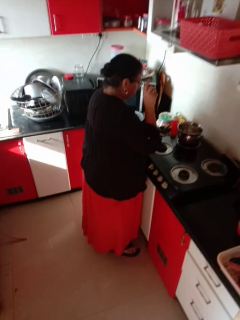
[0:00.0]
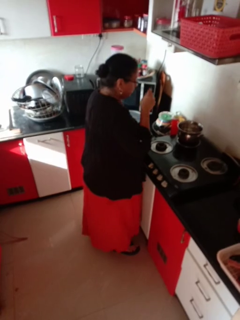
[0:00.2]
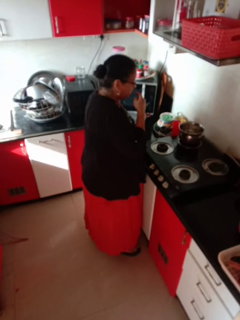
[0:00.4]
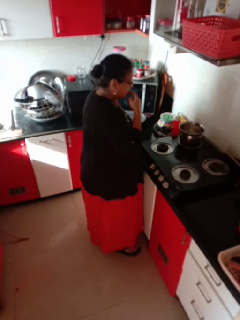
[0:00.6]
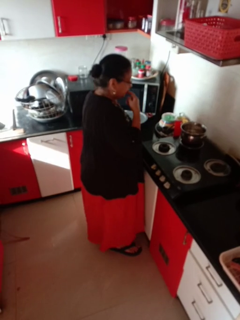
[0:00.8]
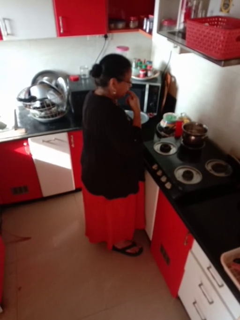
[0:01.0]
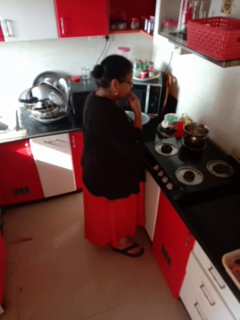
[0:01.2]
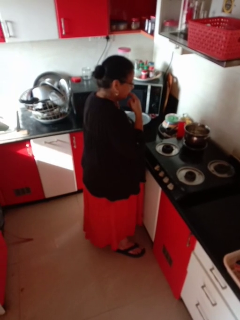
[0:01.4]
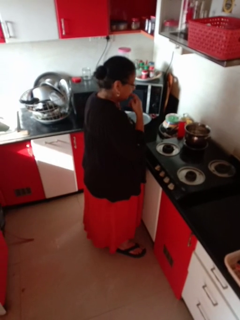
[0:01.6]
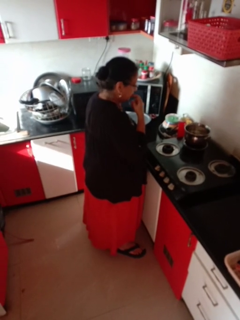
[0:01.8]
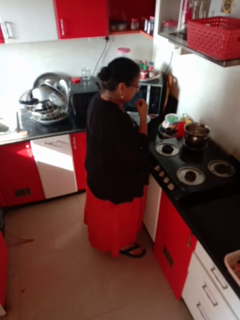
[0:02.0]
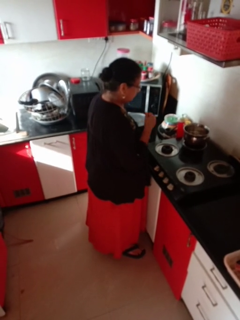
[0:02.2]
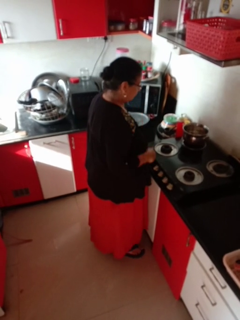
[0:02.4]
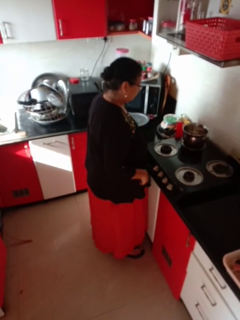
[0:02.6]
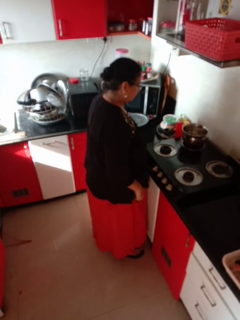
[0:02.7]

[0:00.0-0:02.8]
person burns hand

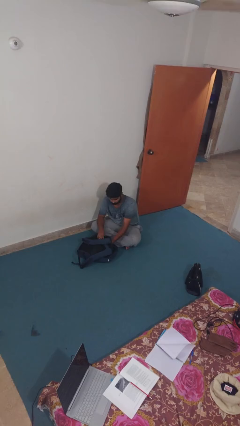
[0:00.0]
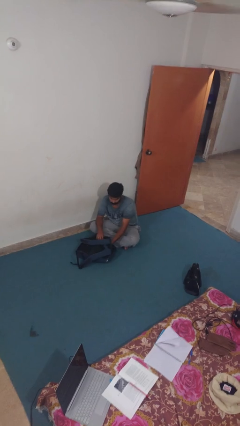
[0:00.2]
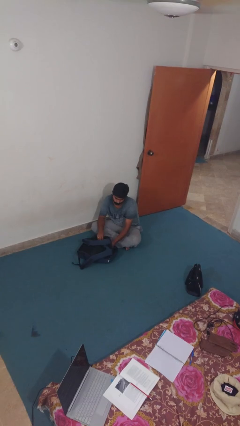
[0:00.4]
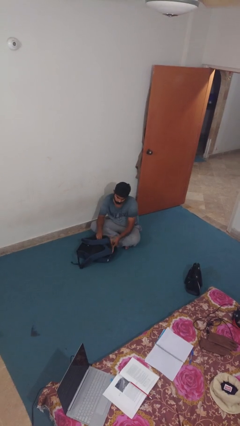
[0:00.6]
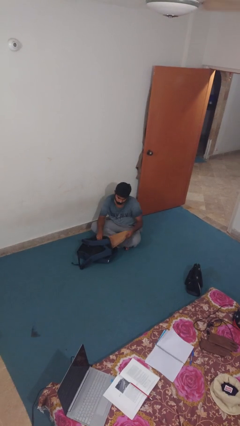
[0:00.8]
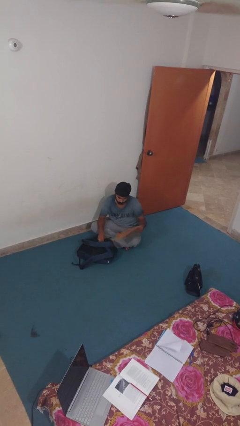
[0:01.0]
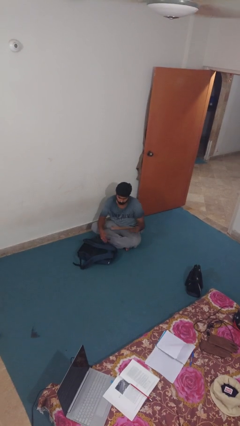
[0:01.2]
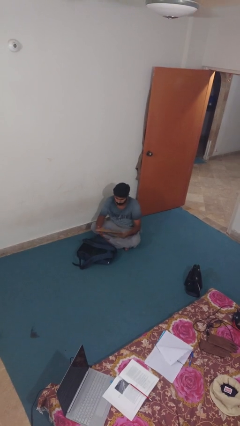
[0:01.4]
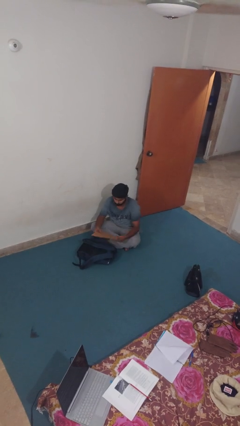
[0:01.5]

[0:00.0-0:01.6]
person takes object from backpack

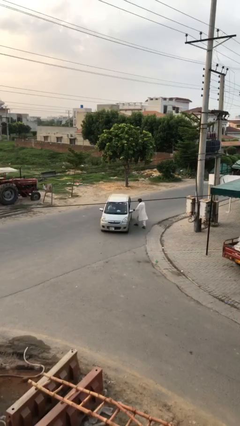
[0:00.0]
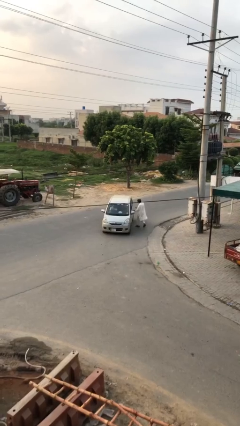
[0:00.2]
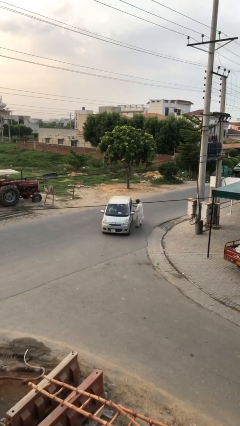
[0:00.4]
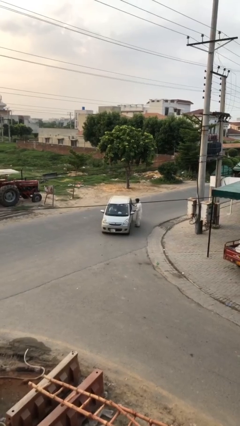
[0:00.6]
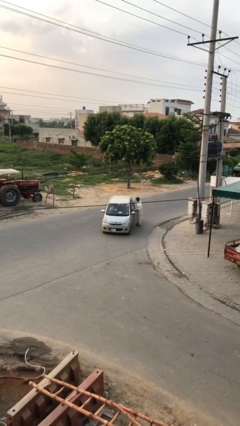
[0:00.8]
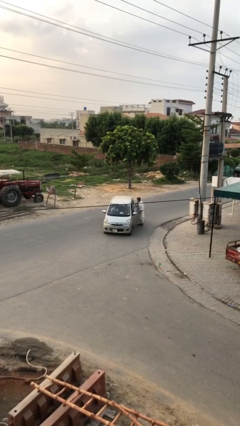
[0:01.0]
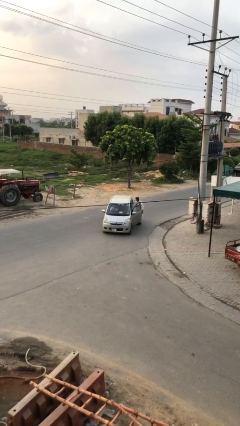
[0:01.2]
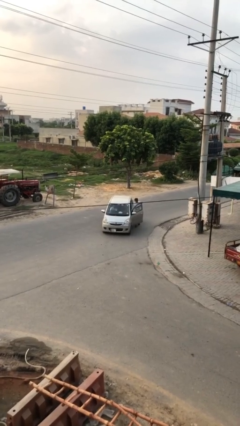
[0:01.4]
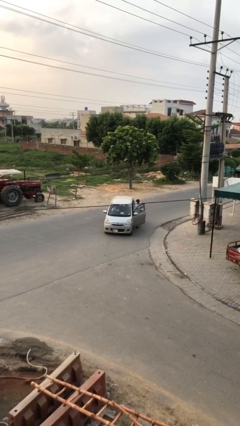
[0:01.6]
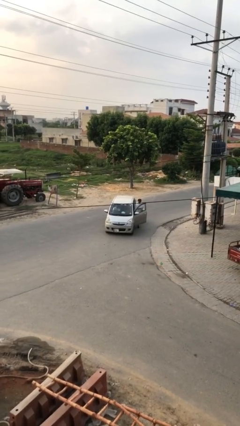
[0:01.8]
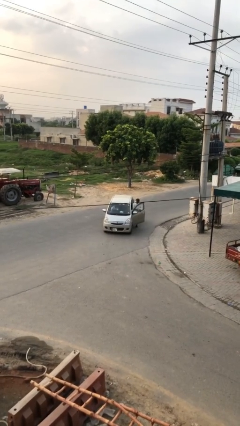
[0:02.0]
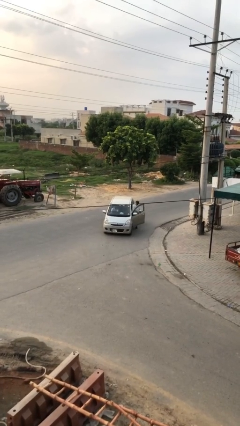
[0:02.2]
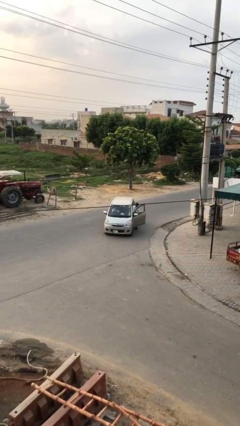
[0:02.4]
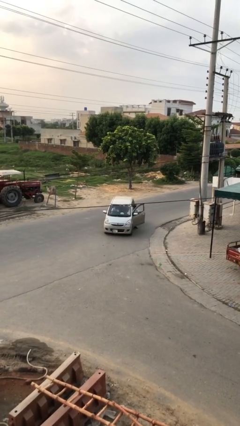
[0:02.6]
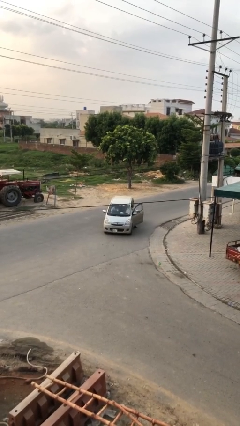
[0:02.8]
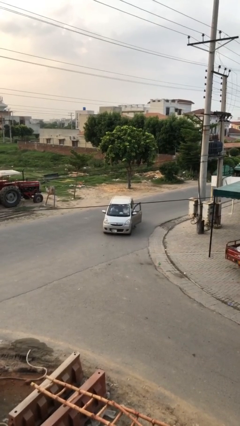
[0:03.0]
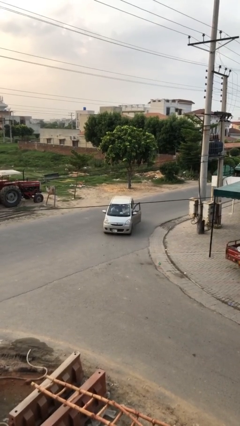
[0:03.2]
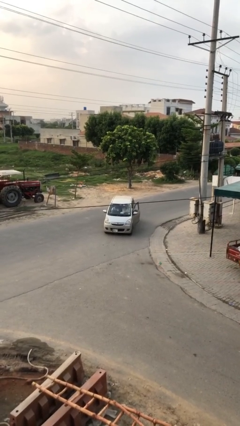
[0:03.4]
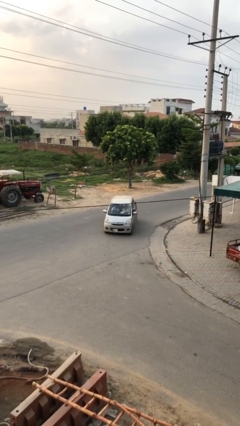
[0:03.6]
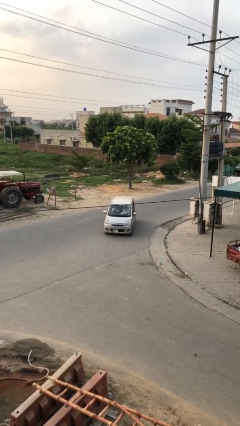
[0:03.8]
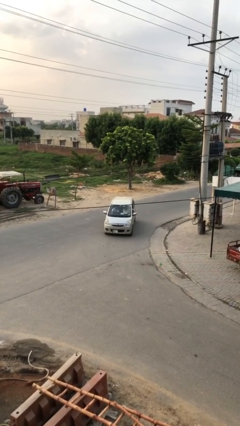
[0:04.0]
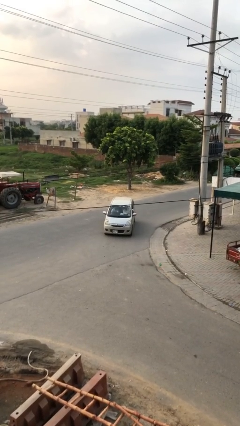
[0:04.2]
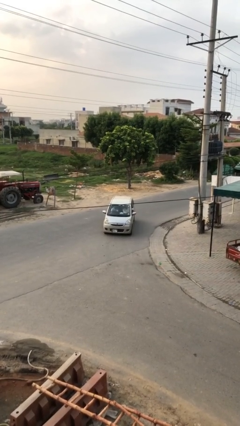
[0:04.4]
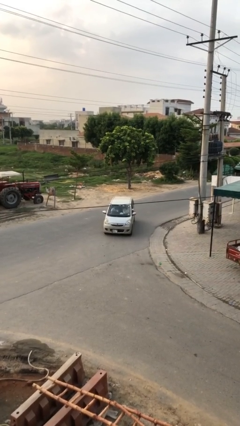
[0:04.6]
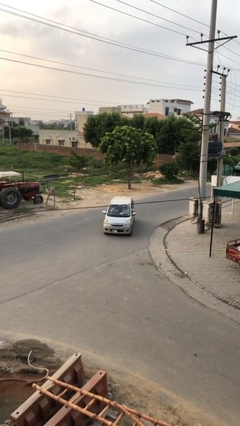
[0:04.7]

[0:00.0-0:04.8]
car picks up person

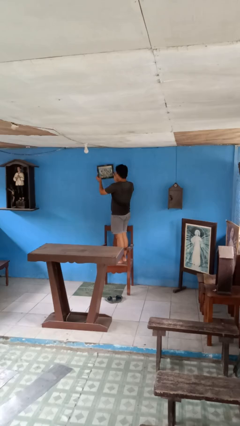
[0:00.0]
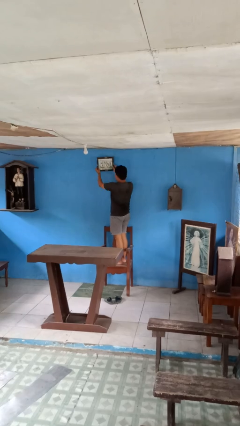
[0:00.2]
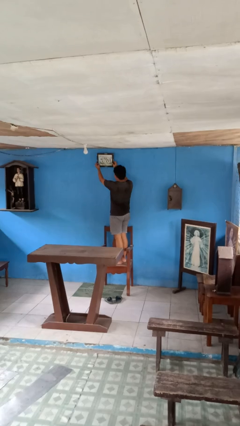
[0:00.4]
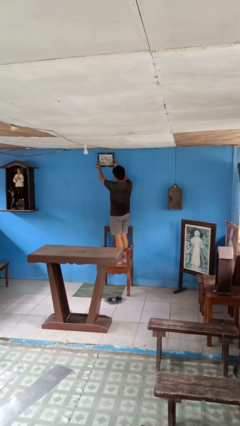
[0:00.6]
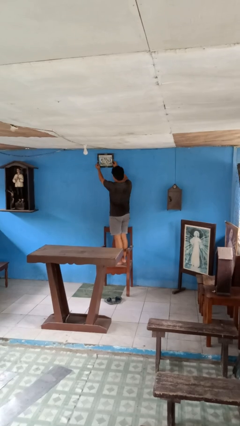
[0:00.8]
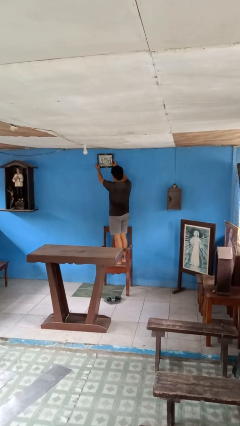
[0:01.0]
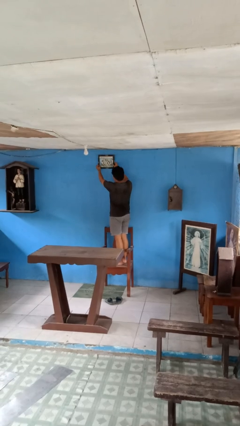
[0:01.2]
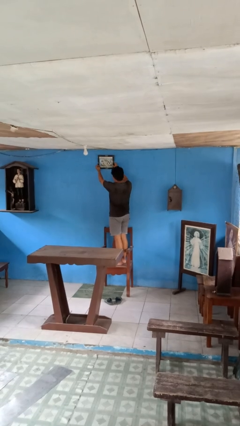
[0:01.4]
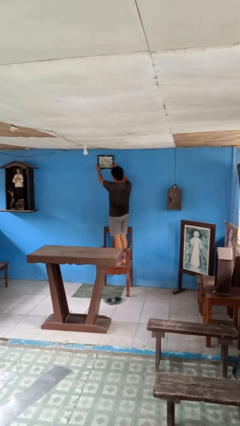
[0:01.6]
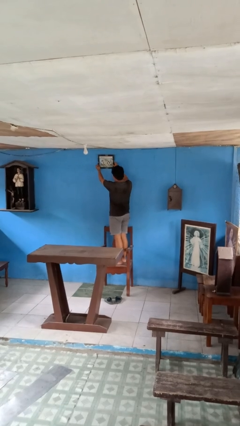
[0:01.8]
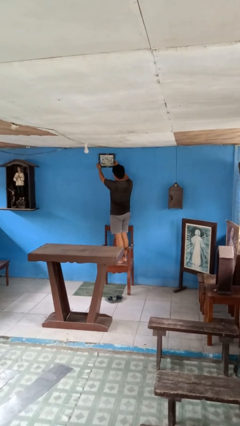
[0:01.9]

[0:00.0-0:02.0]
person puts up picture frame

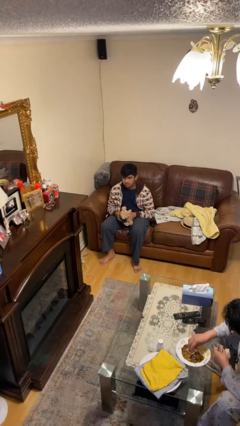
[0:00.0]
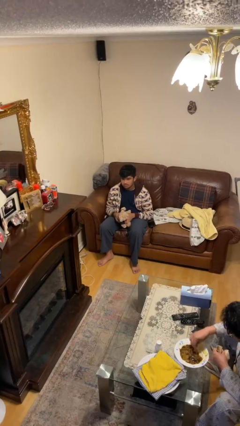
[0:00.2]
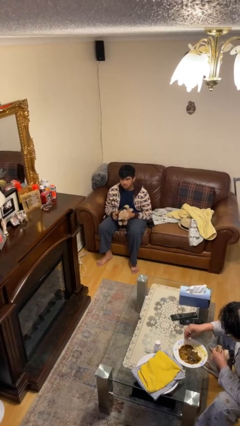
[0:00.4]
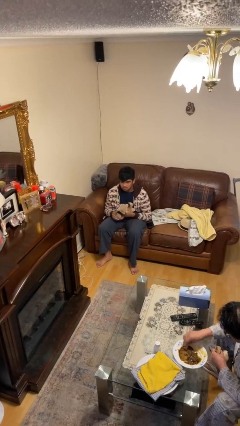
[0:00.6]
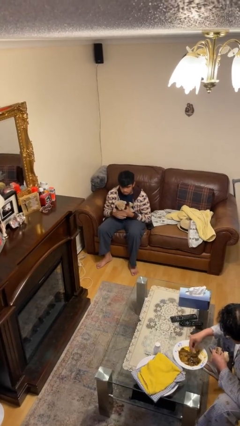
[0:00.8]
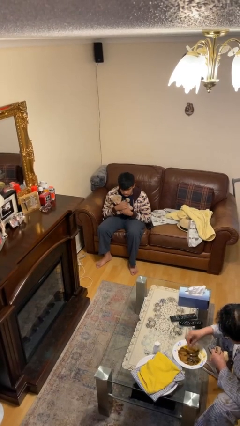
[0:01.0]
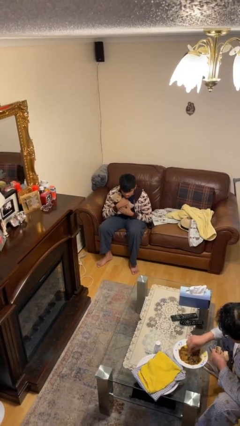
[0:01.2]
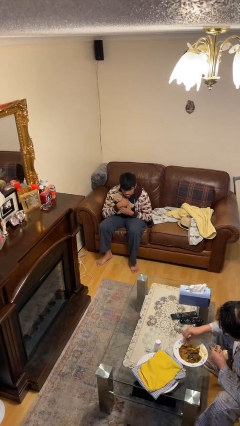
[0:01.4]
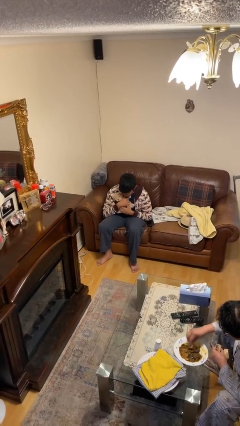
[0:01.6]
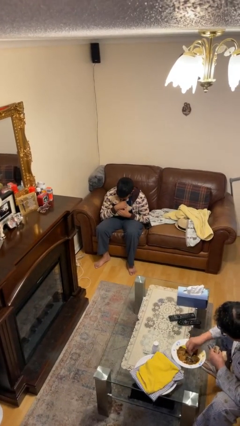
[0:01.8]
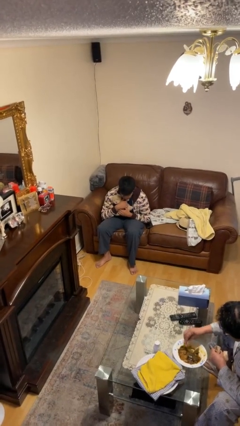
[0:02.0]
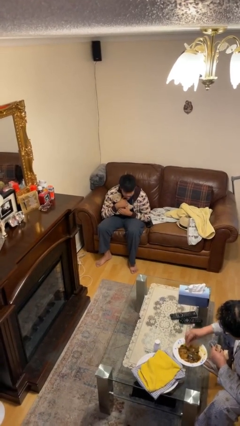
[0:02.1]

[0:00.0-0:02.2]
person hugs stuffed animal

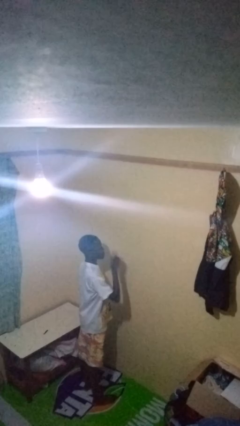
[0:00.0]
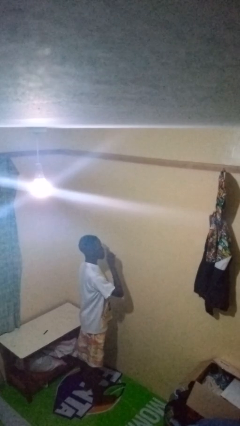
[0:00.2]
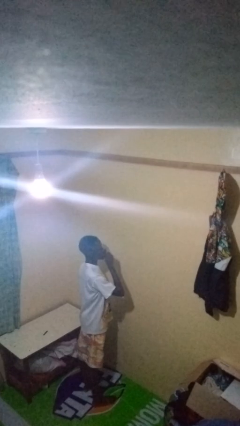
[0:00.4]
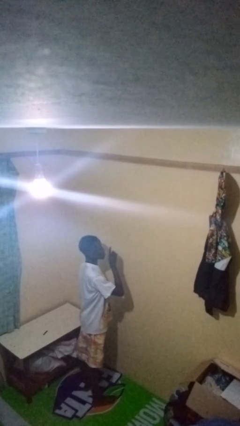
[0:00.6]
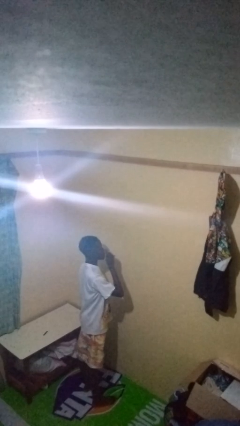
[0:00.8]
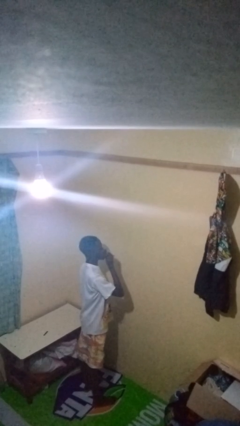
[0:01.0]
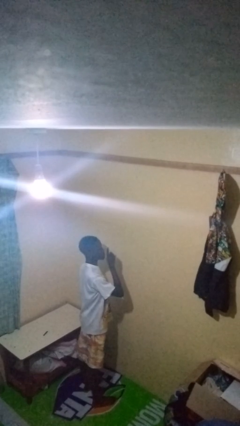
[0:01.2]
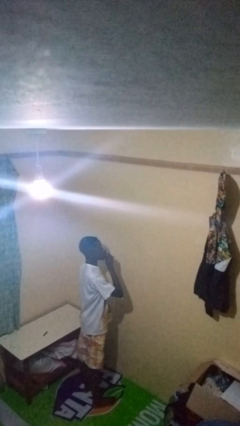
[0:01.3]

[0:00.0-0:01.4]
person gestures be quiet

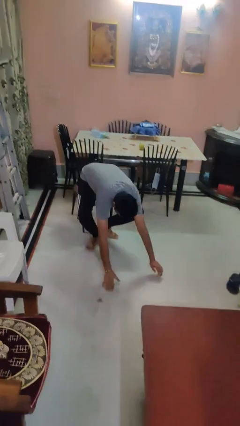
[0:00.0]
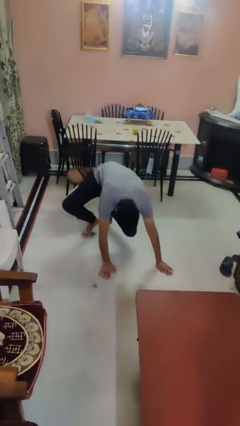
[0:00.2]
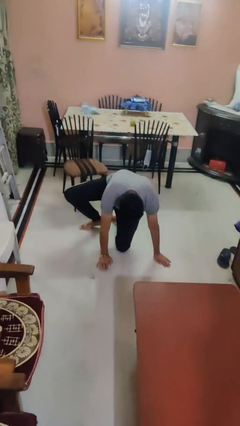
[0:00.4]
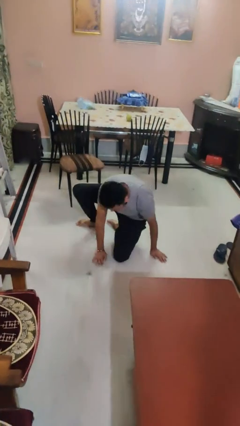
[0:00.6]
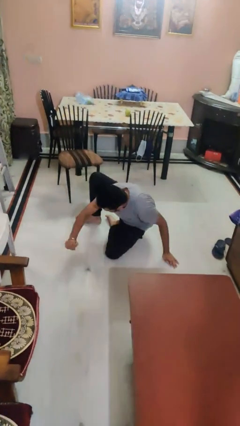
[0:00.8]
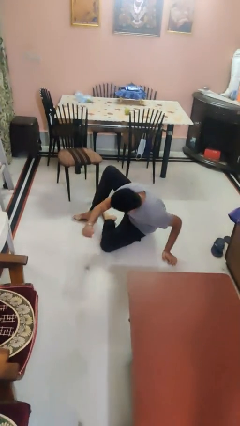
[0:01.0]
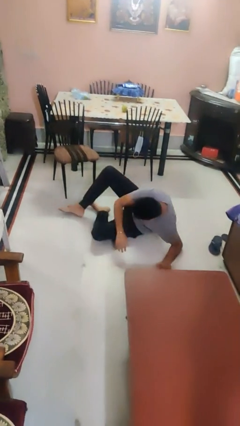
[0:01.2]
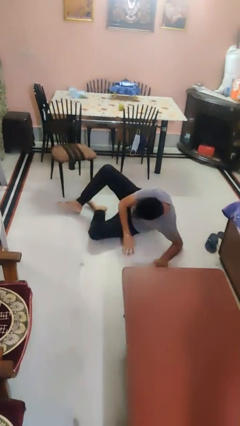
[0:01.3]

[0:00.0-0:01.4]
person falls while standing

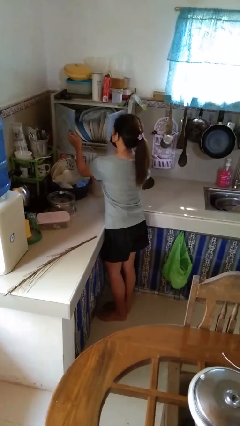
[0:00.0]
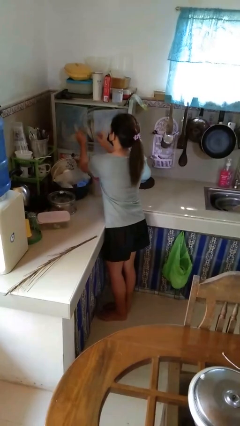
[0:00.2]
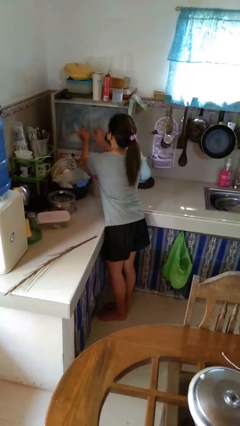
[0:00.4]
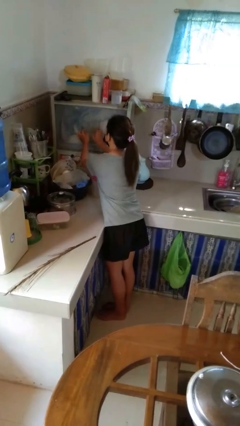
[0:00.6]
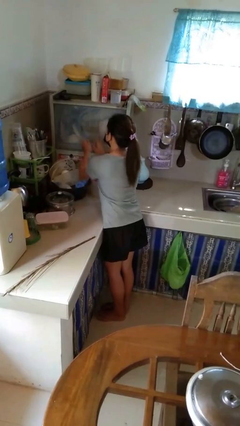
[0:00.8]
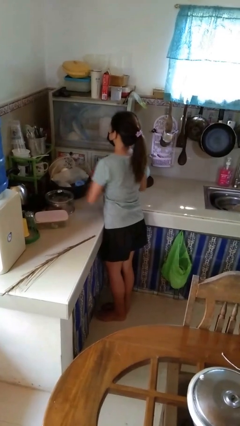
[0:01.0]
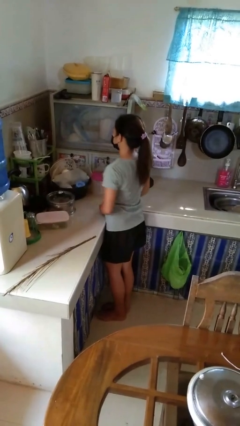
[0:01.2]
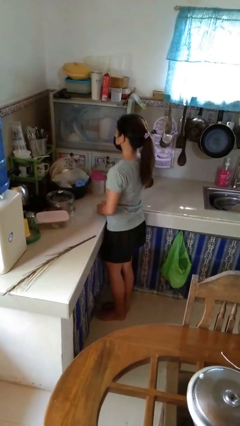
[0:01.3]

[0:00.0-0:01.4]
person closes kitchen drawer
